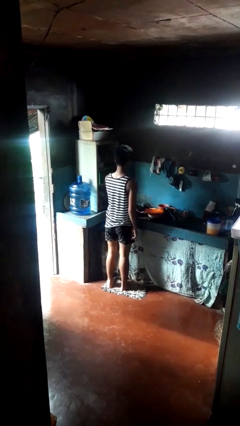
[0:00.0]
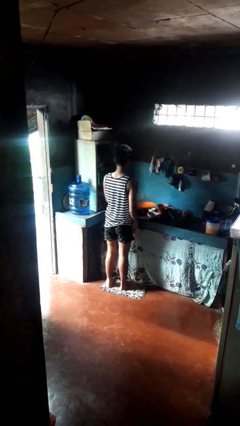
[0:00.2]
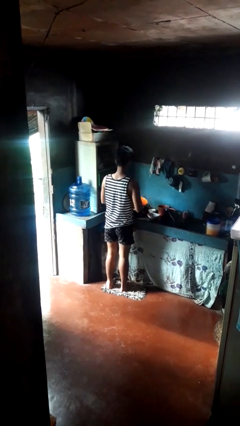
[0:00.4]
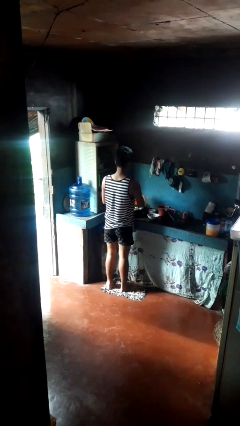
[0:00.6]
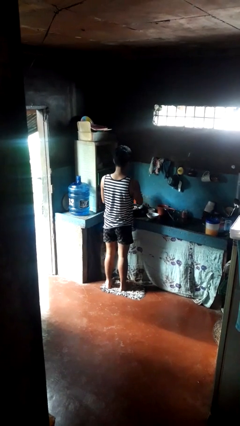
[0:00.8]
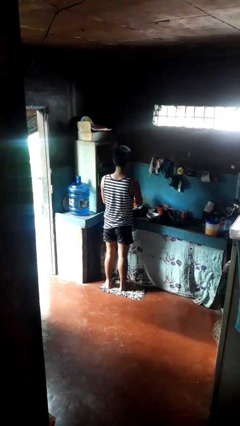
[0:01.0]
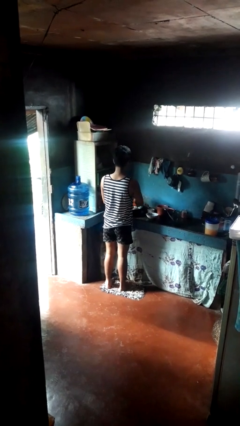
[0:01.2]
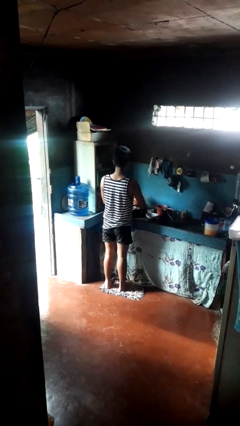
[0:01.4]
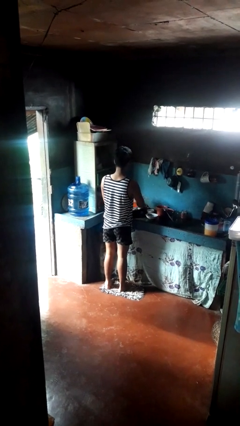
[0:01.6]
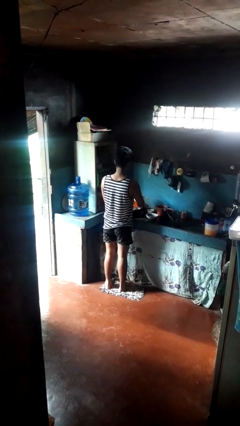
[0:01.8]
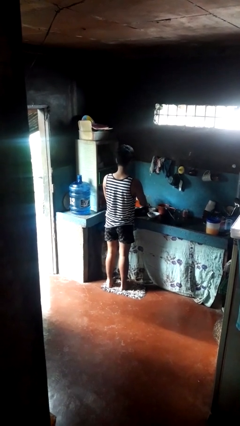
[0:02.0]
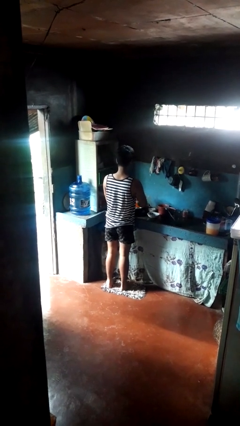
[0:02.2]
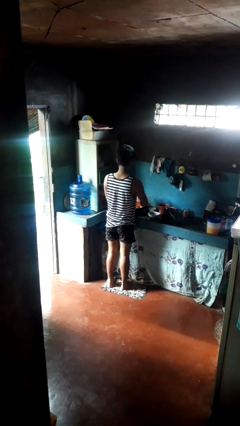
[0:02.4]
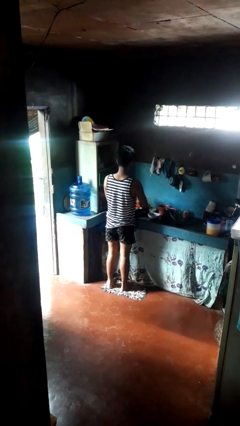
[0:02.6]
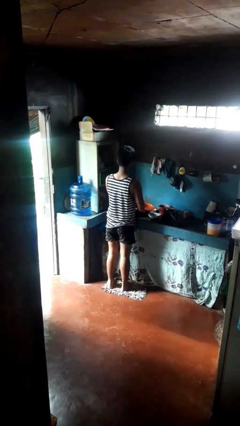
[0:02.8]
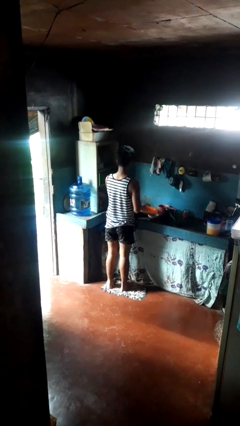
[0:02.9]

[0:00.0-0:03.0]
person washes dish

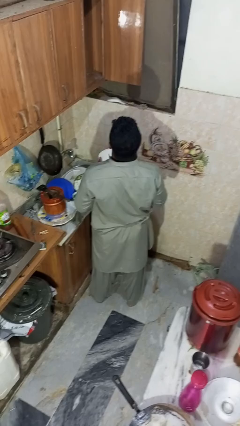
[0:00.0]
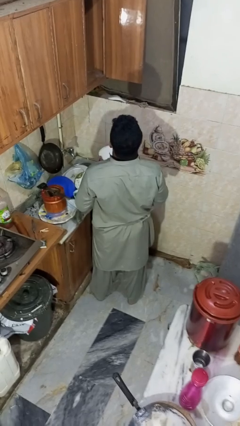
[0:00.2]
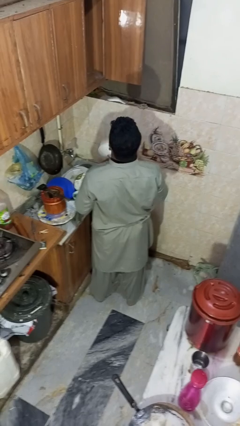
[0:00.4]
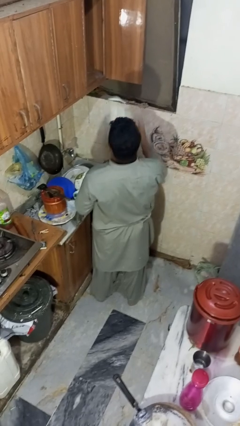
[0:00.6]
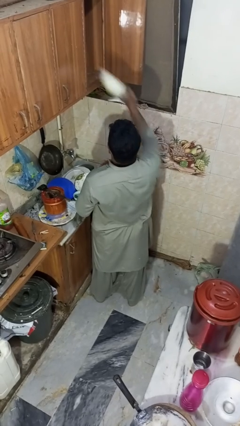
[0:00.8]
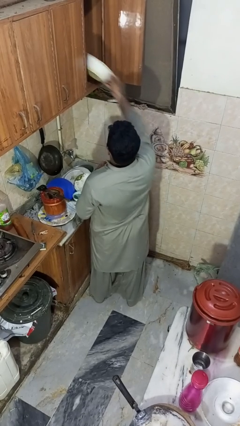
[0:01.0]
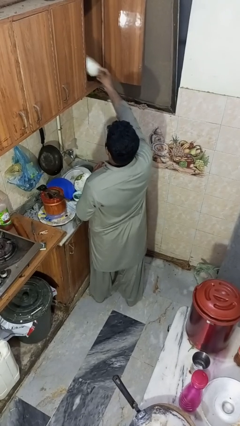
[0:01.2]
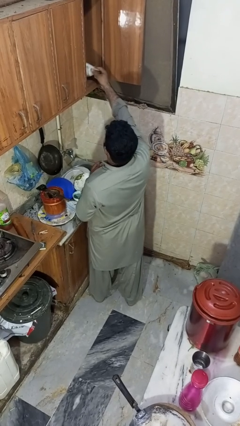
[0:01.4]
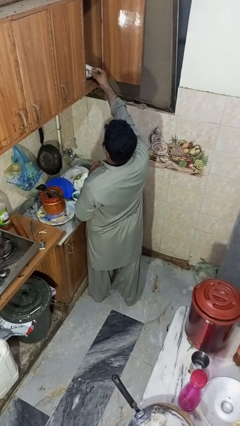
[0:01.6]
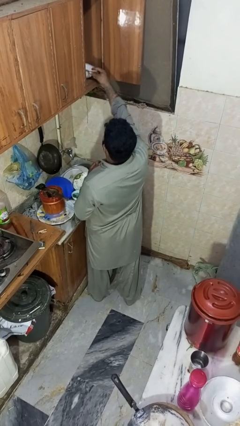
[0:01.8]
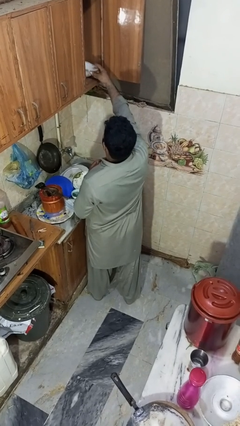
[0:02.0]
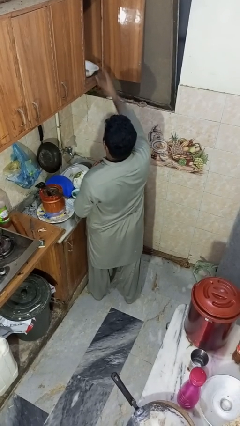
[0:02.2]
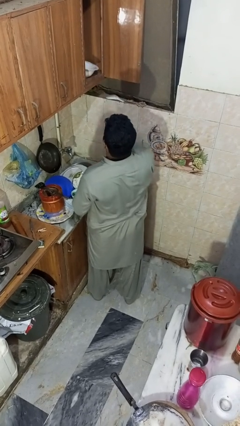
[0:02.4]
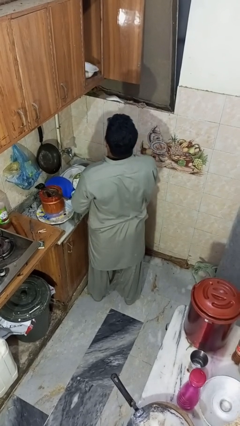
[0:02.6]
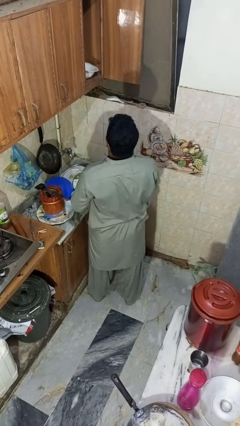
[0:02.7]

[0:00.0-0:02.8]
person puts object in cabinet

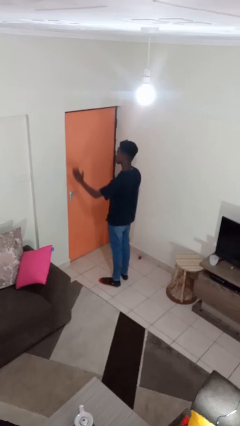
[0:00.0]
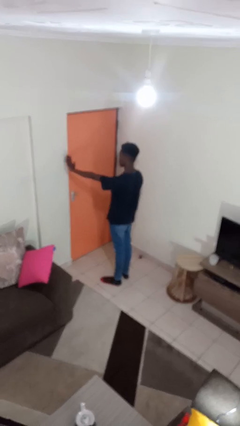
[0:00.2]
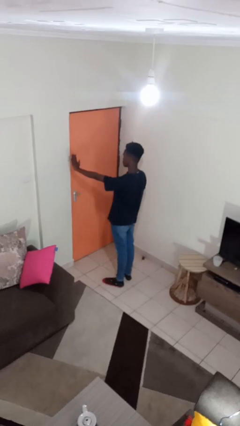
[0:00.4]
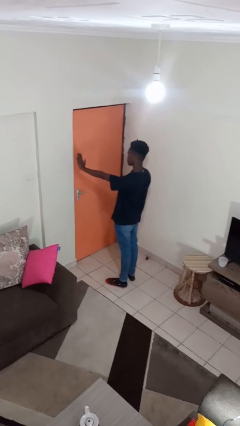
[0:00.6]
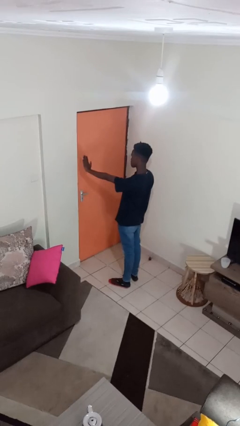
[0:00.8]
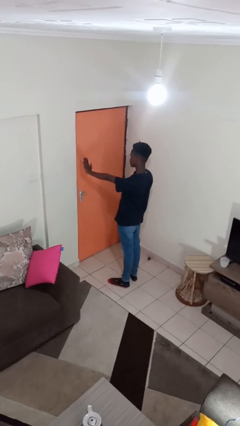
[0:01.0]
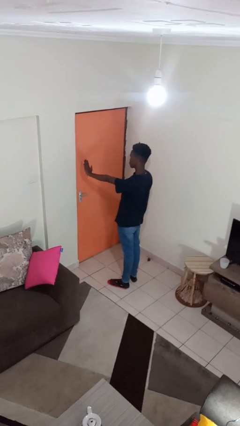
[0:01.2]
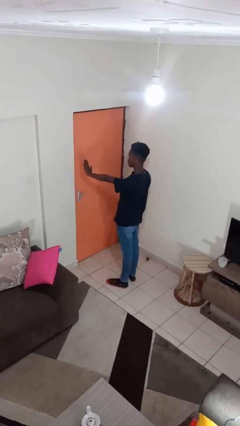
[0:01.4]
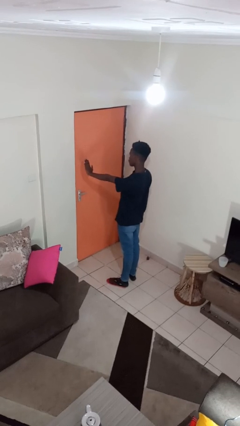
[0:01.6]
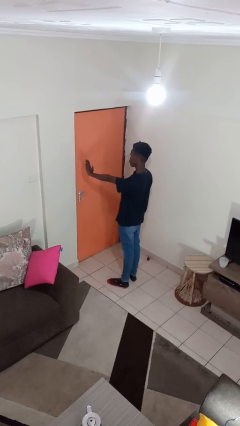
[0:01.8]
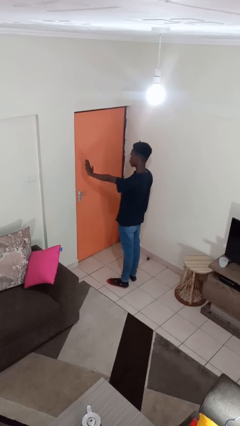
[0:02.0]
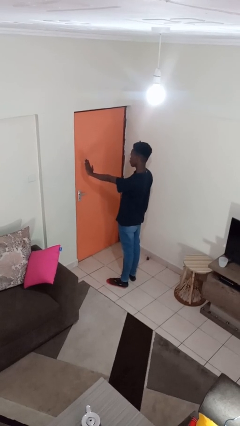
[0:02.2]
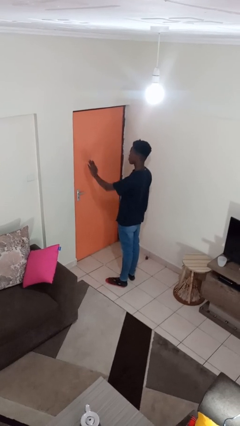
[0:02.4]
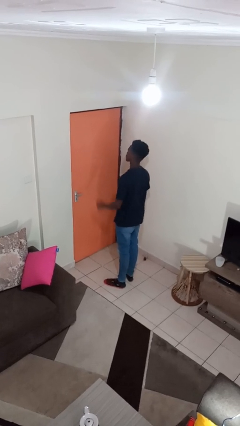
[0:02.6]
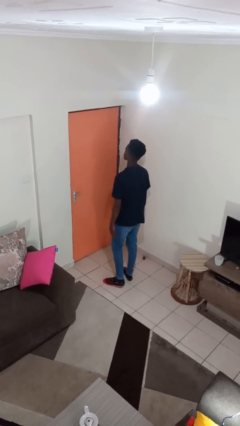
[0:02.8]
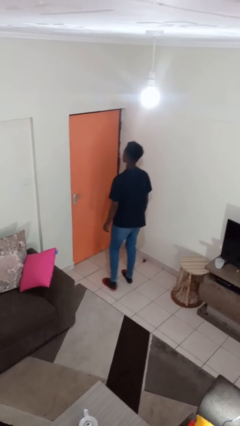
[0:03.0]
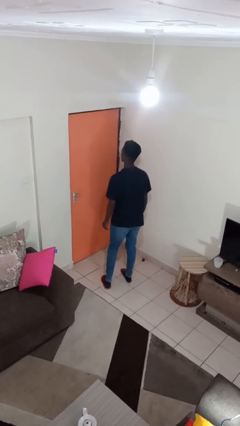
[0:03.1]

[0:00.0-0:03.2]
person gestures stop

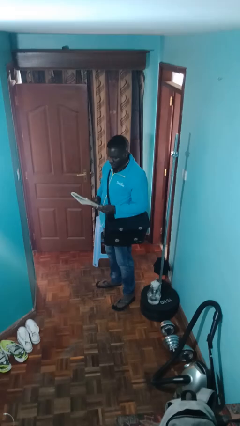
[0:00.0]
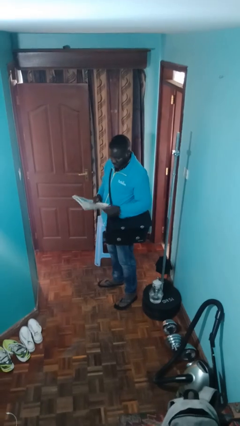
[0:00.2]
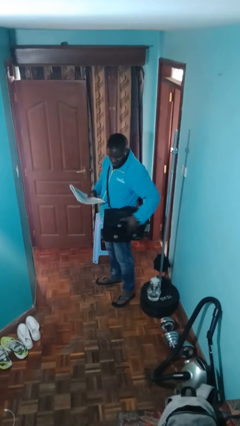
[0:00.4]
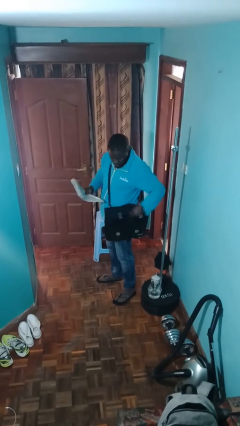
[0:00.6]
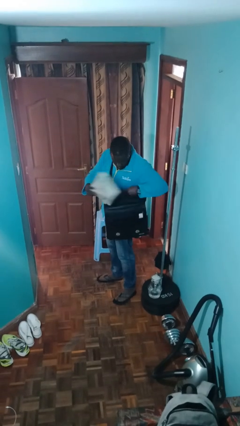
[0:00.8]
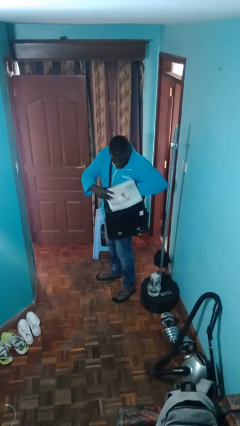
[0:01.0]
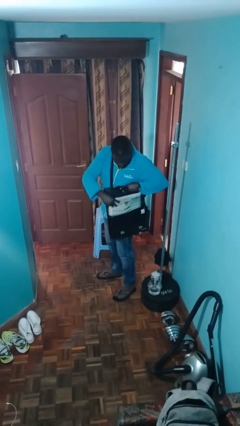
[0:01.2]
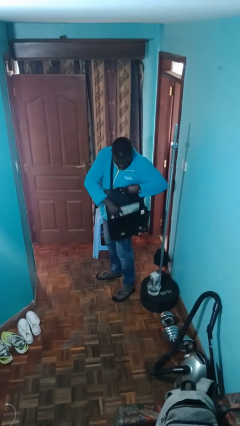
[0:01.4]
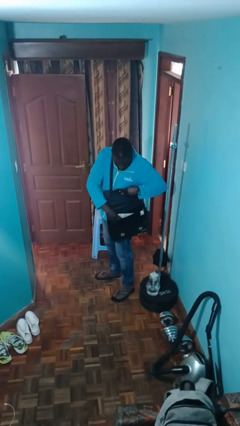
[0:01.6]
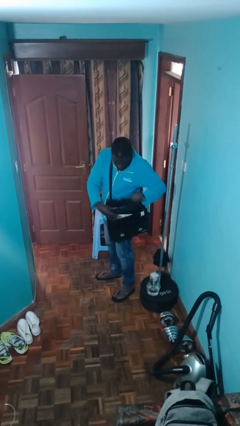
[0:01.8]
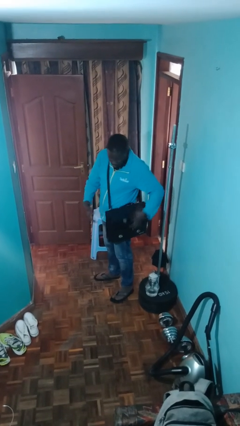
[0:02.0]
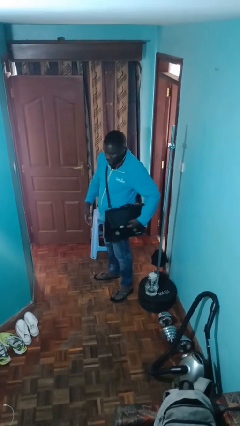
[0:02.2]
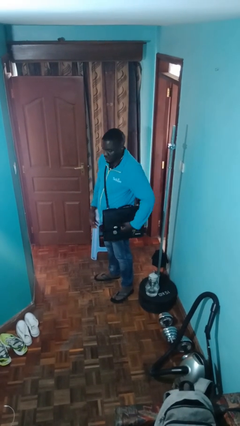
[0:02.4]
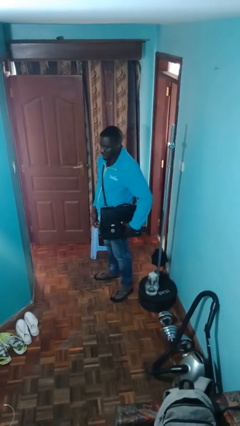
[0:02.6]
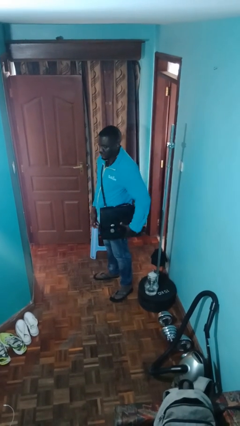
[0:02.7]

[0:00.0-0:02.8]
person puts object into purse

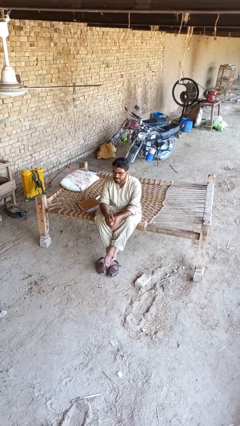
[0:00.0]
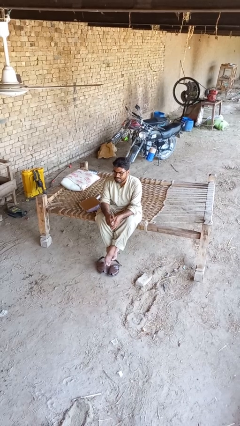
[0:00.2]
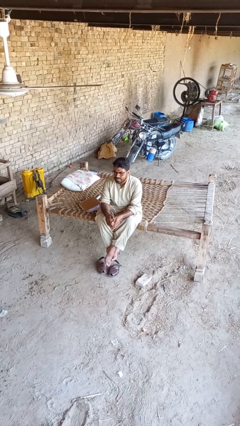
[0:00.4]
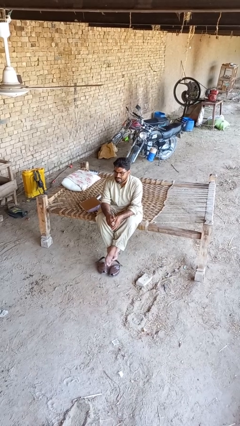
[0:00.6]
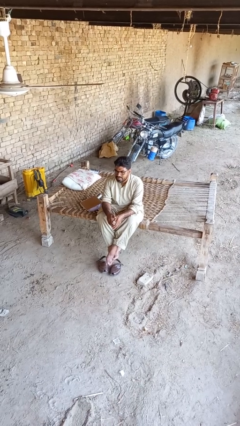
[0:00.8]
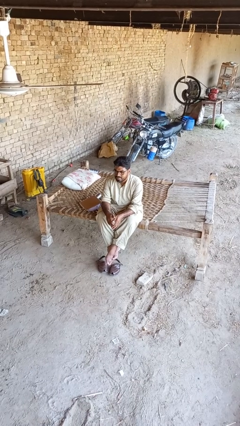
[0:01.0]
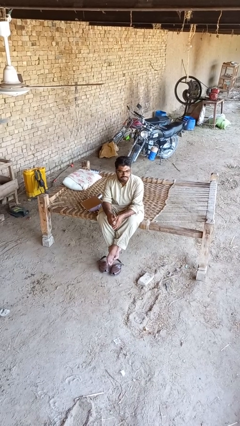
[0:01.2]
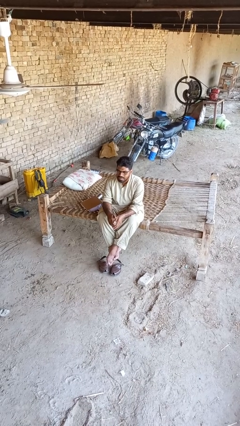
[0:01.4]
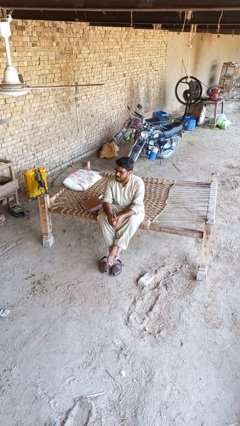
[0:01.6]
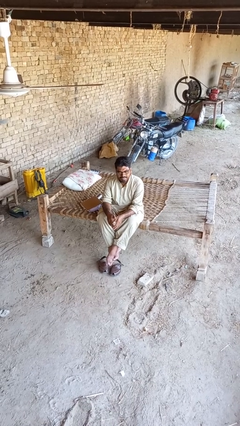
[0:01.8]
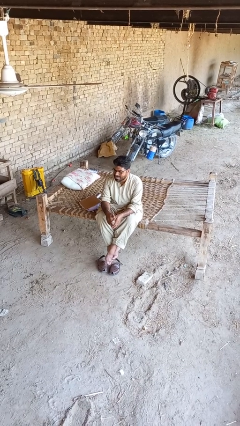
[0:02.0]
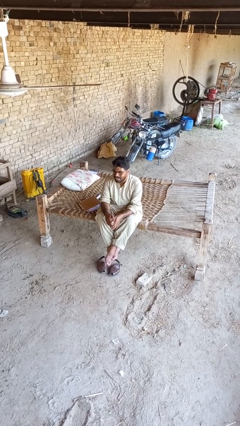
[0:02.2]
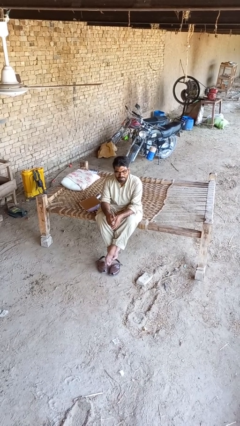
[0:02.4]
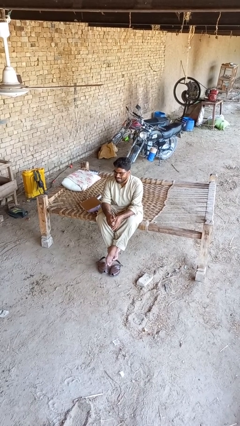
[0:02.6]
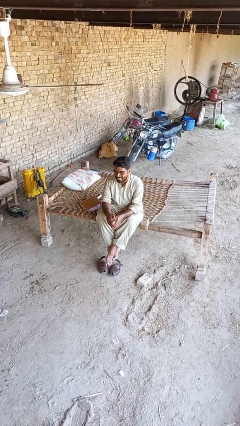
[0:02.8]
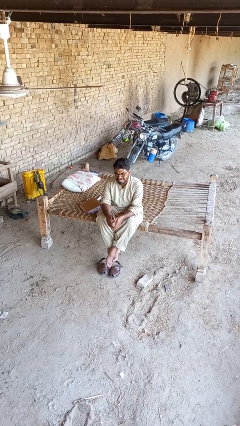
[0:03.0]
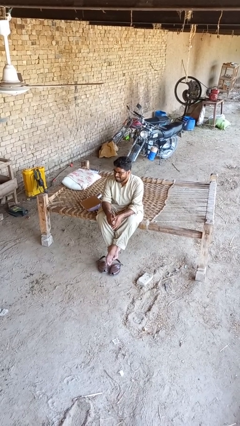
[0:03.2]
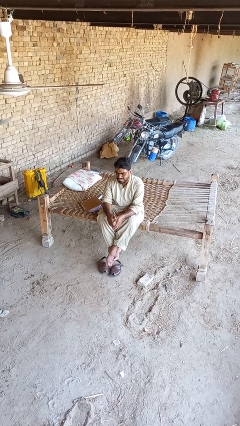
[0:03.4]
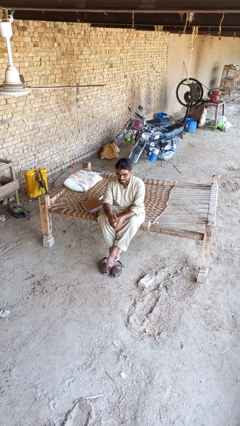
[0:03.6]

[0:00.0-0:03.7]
person shakes head

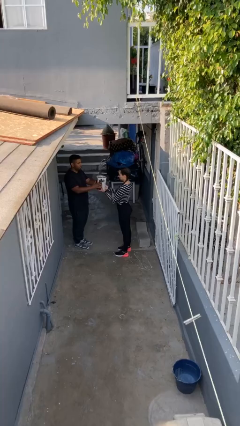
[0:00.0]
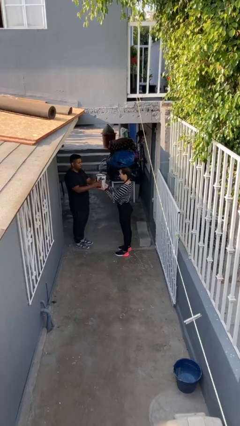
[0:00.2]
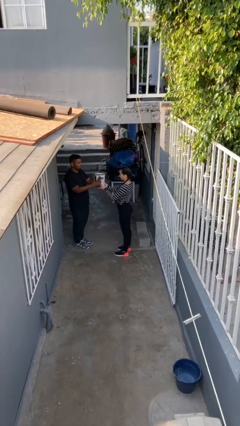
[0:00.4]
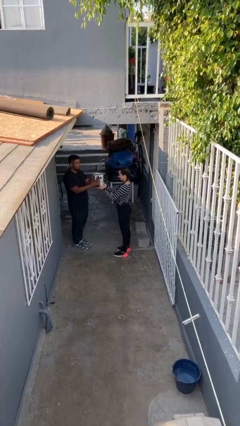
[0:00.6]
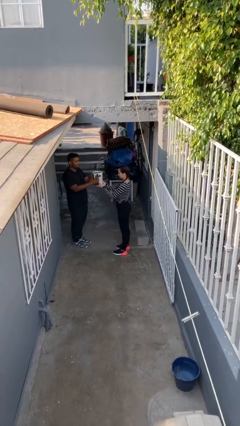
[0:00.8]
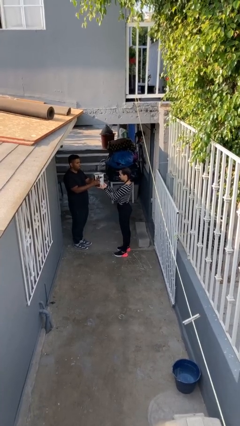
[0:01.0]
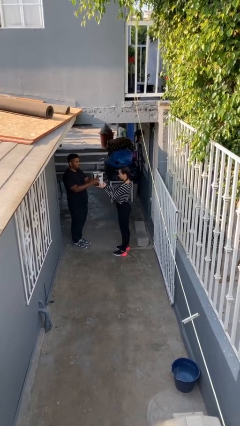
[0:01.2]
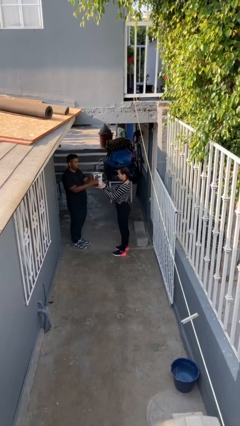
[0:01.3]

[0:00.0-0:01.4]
person transfers object to person

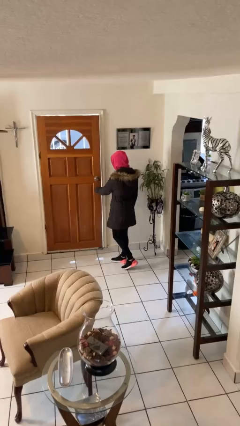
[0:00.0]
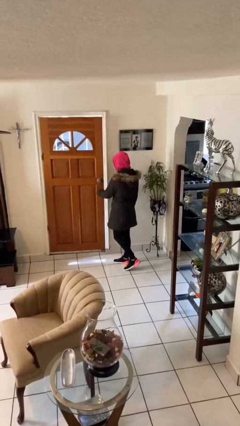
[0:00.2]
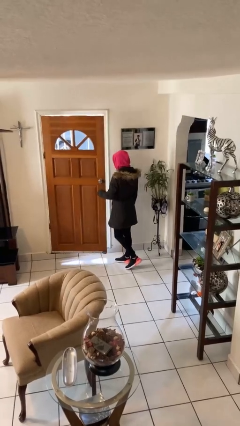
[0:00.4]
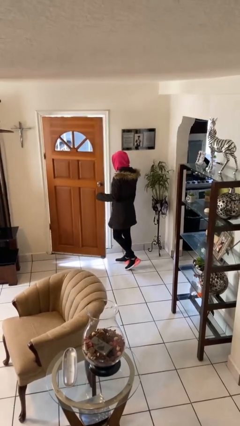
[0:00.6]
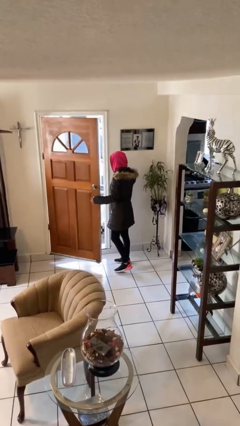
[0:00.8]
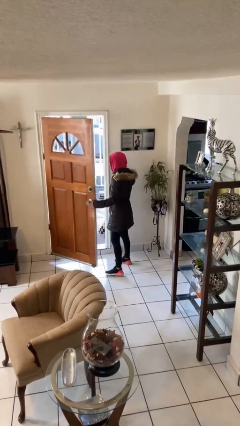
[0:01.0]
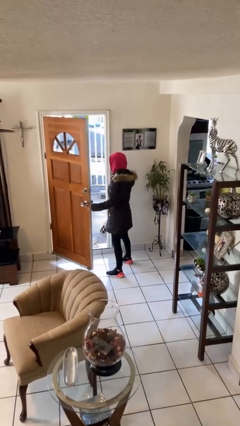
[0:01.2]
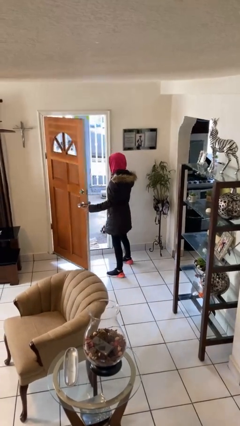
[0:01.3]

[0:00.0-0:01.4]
person opens facility door
